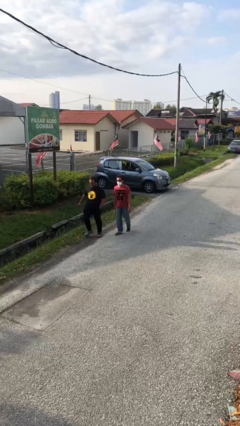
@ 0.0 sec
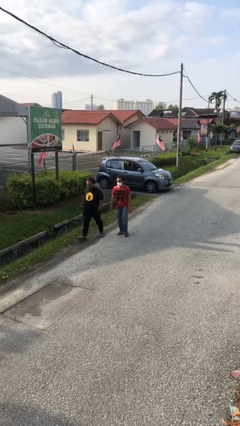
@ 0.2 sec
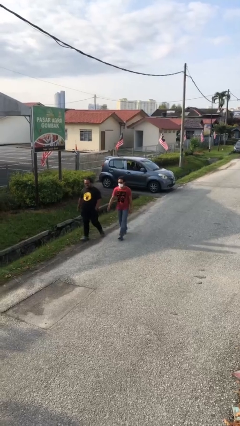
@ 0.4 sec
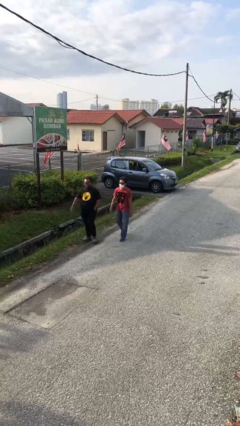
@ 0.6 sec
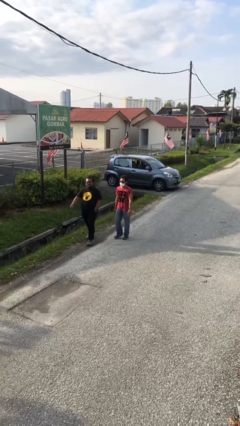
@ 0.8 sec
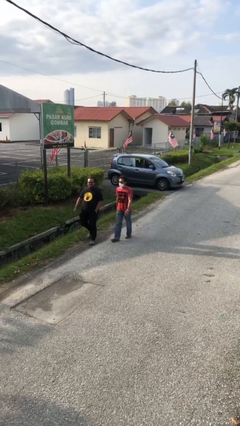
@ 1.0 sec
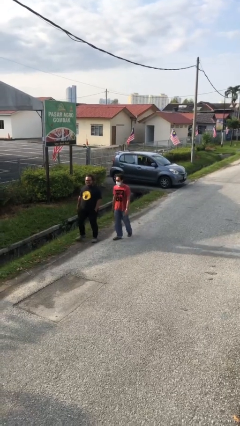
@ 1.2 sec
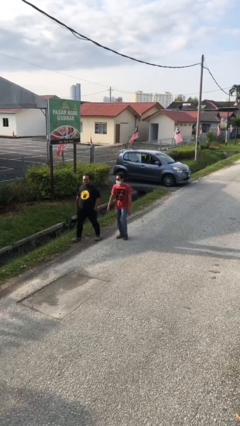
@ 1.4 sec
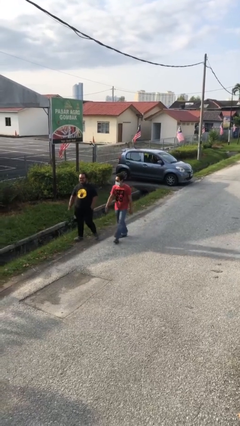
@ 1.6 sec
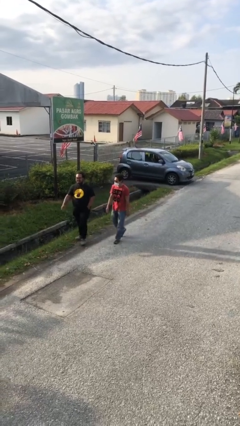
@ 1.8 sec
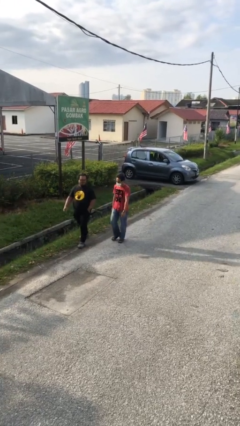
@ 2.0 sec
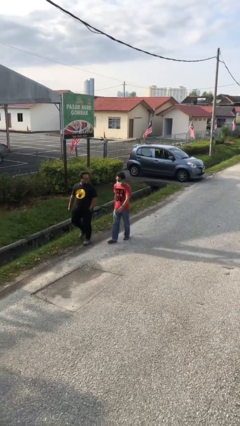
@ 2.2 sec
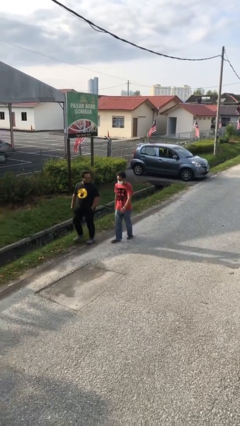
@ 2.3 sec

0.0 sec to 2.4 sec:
person talks to person

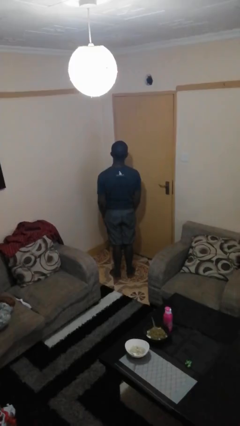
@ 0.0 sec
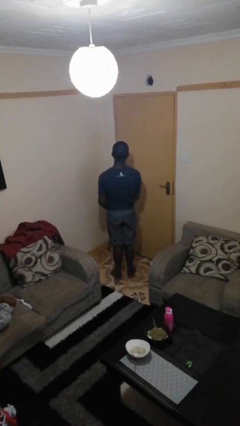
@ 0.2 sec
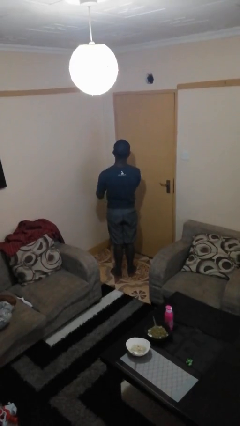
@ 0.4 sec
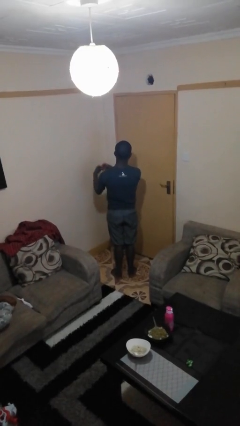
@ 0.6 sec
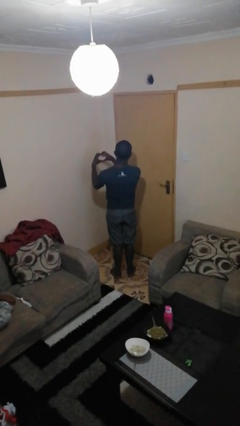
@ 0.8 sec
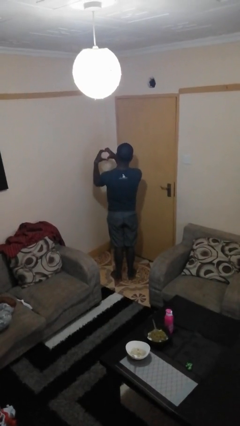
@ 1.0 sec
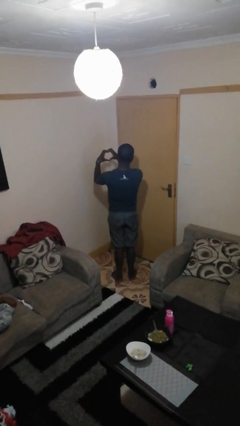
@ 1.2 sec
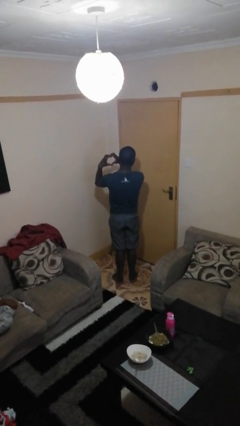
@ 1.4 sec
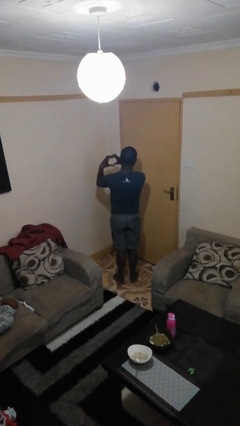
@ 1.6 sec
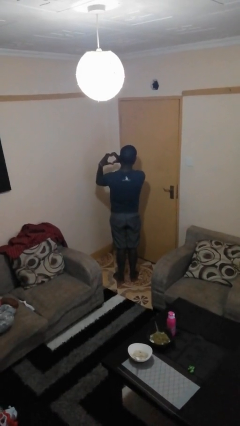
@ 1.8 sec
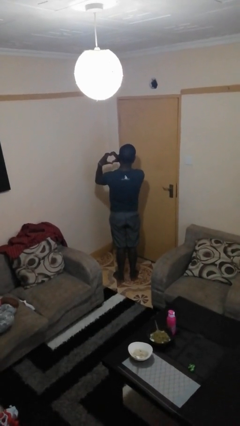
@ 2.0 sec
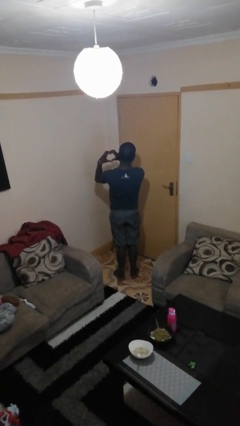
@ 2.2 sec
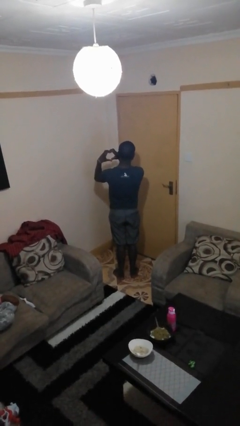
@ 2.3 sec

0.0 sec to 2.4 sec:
person gestures heart

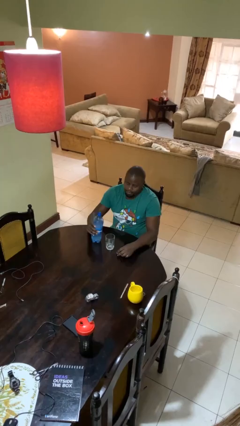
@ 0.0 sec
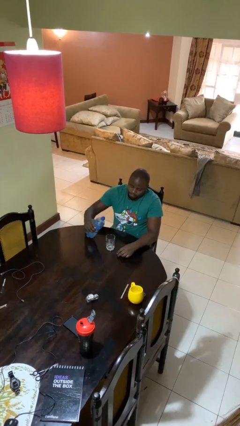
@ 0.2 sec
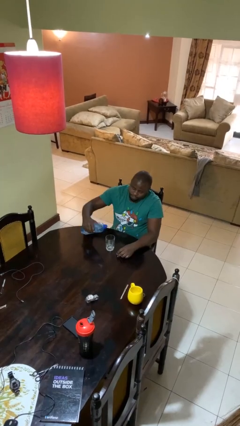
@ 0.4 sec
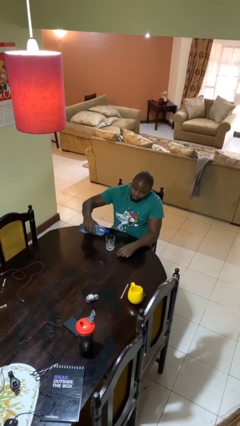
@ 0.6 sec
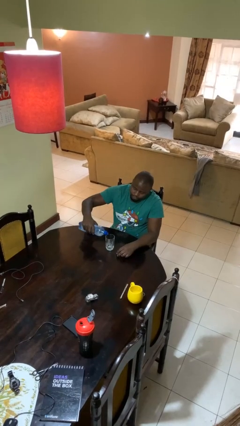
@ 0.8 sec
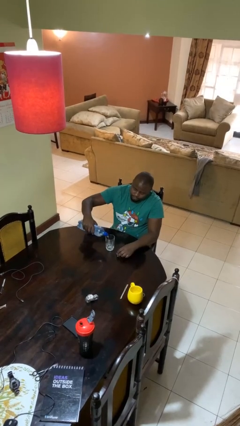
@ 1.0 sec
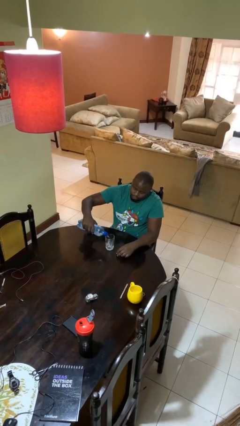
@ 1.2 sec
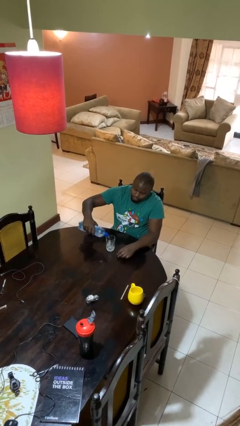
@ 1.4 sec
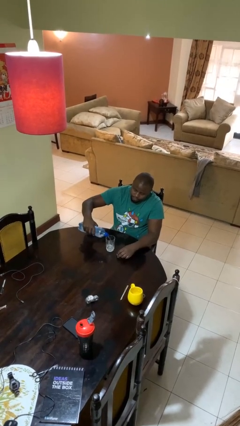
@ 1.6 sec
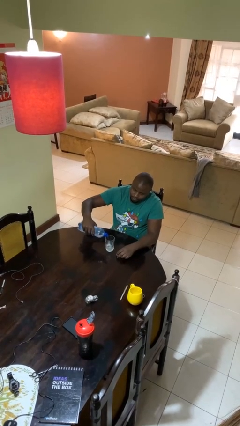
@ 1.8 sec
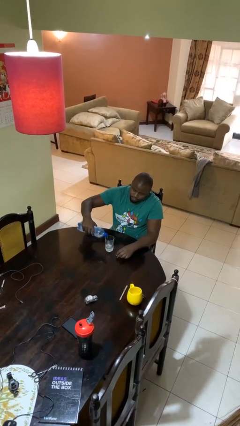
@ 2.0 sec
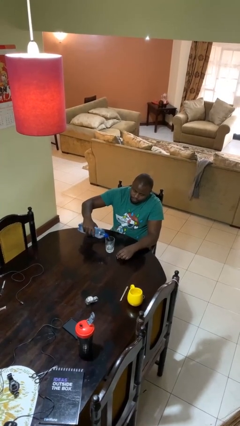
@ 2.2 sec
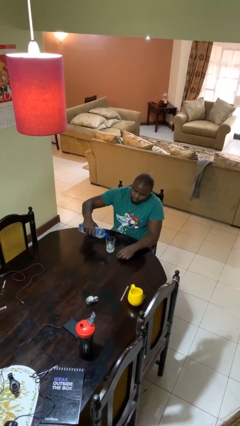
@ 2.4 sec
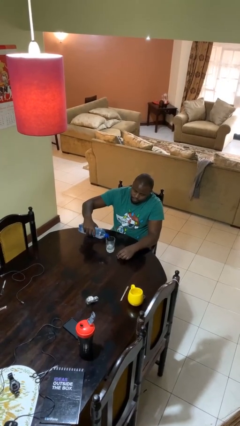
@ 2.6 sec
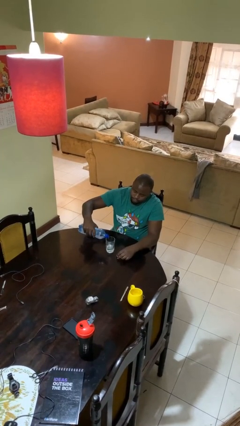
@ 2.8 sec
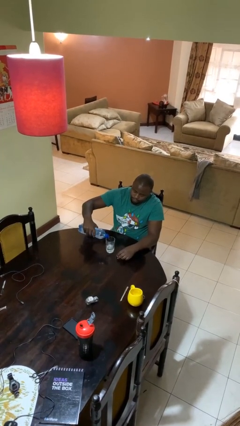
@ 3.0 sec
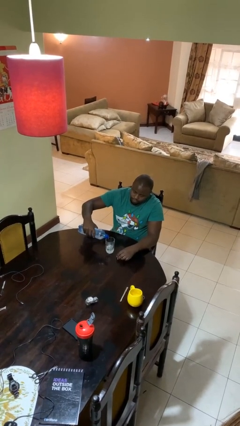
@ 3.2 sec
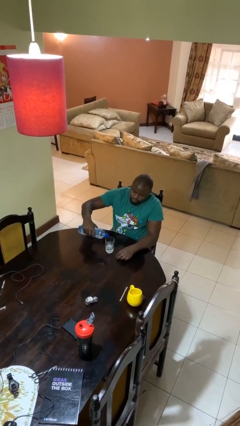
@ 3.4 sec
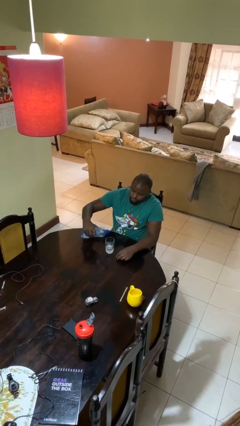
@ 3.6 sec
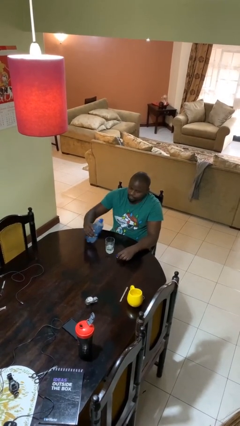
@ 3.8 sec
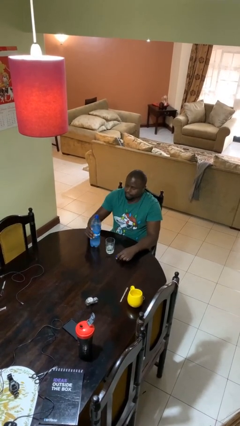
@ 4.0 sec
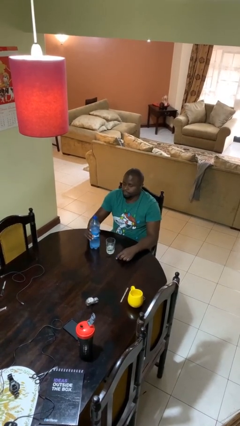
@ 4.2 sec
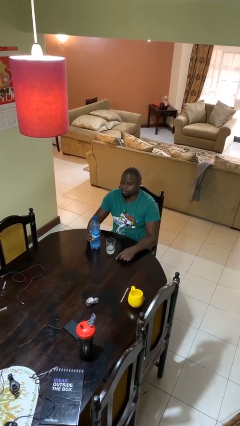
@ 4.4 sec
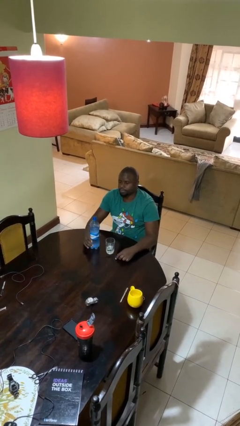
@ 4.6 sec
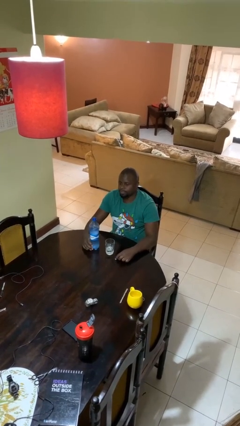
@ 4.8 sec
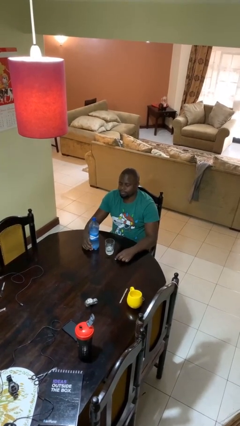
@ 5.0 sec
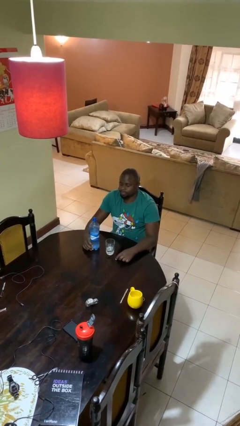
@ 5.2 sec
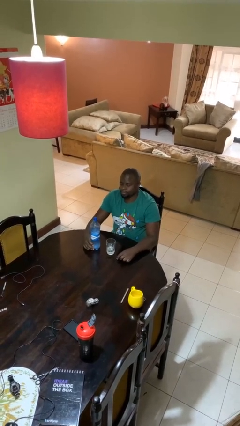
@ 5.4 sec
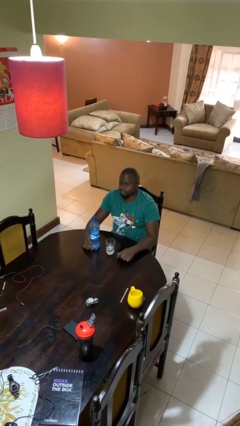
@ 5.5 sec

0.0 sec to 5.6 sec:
person pours liquid into cup

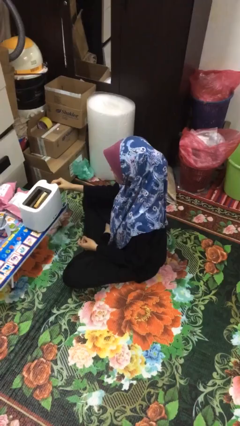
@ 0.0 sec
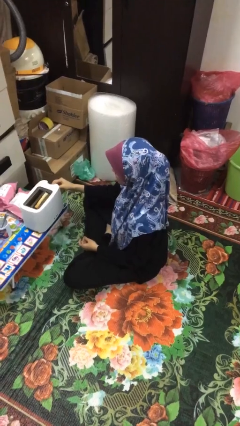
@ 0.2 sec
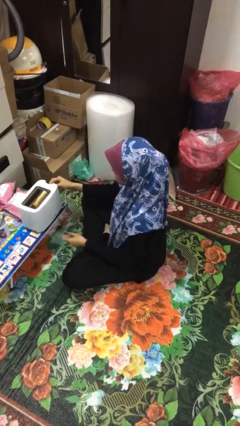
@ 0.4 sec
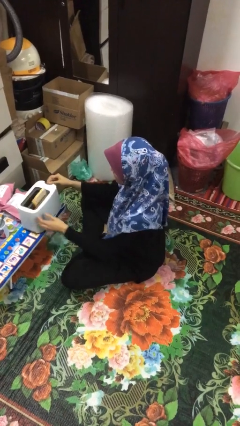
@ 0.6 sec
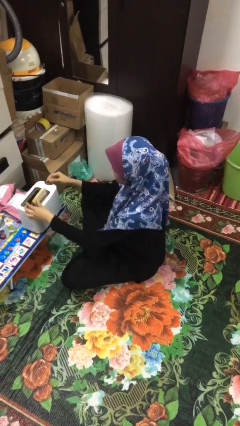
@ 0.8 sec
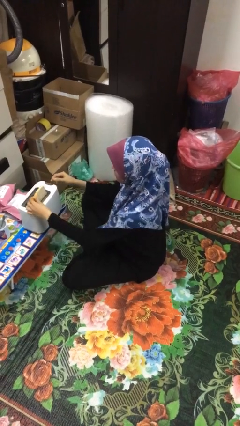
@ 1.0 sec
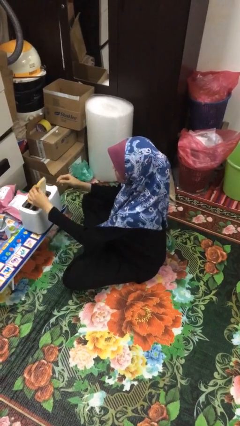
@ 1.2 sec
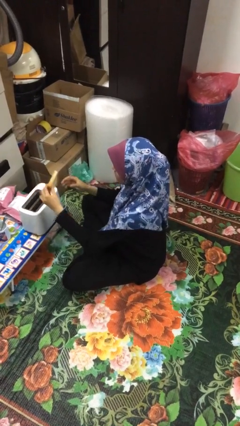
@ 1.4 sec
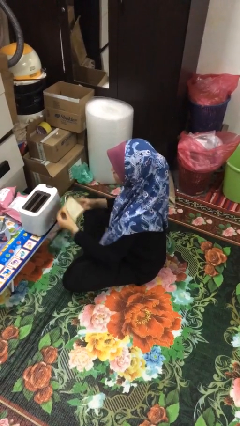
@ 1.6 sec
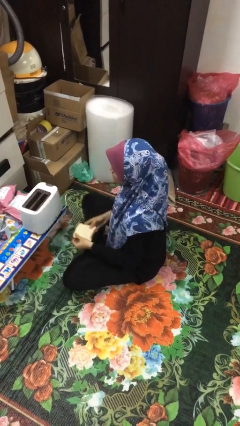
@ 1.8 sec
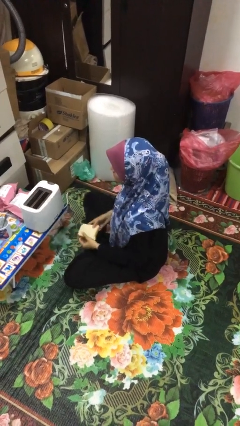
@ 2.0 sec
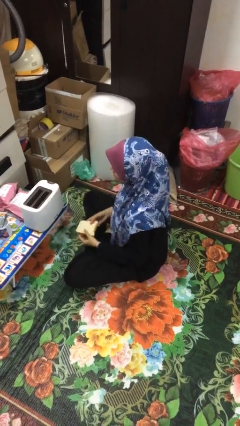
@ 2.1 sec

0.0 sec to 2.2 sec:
person takes object from toaster

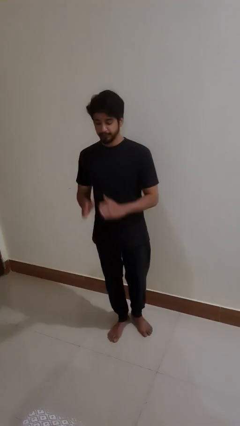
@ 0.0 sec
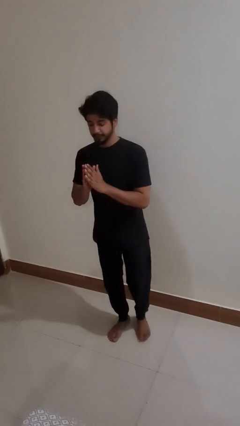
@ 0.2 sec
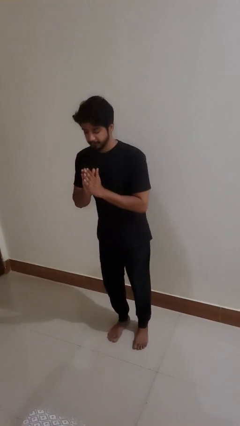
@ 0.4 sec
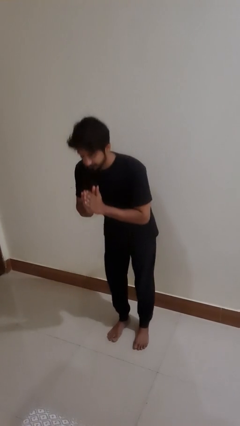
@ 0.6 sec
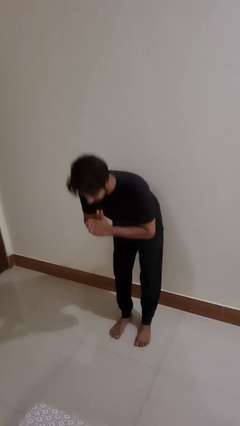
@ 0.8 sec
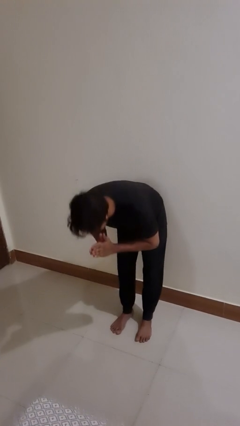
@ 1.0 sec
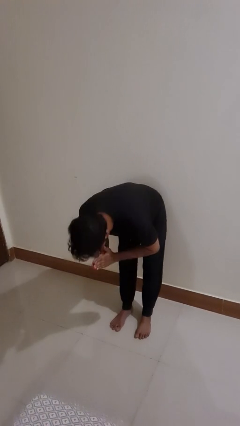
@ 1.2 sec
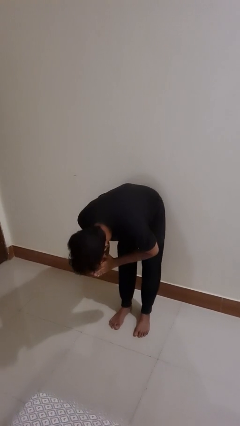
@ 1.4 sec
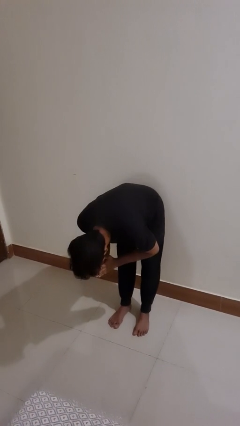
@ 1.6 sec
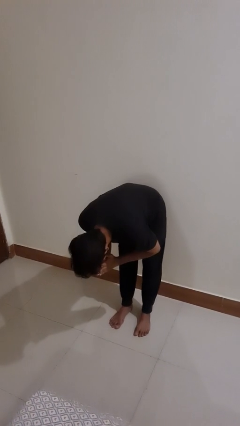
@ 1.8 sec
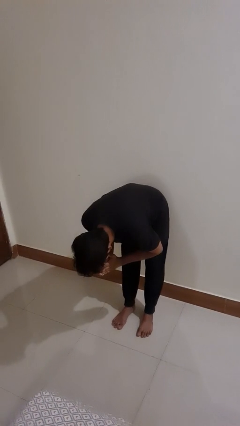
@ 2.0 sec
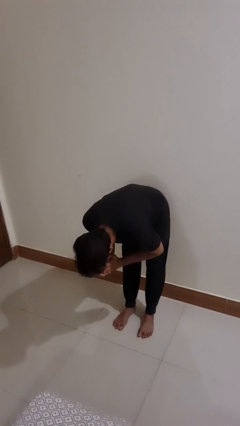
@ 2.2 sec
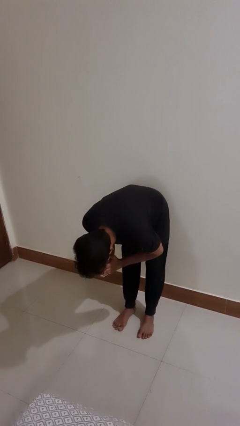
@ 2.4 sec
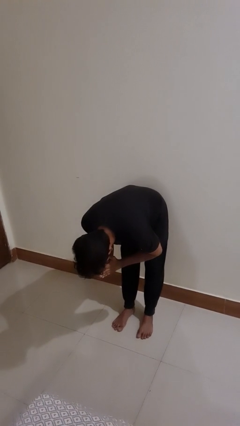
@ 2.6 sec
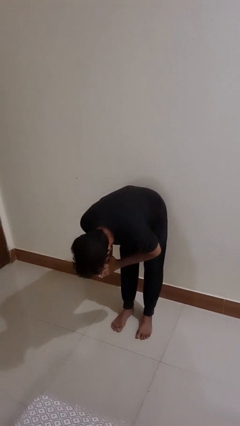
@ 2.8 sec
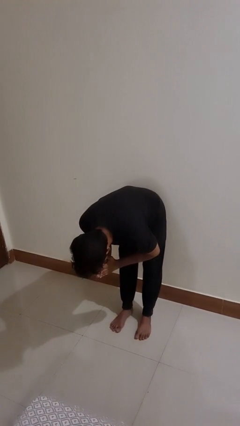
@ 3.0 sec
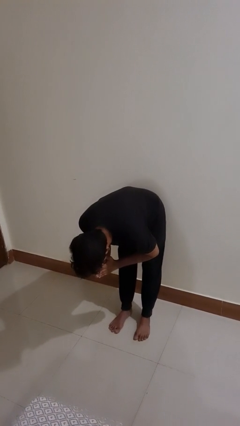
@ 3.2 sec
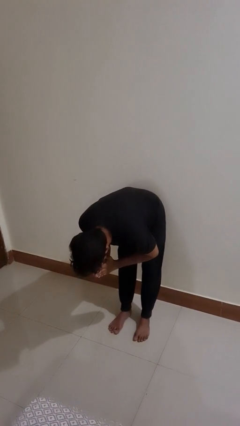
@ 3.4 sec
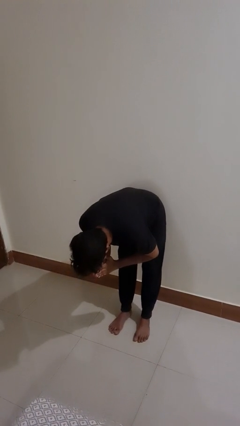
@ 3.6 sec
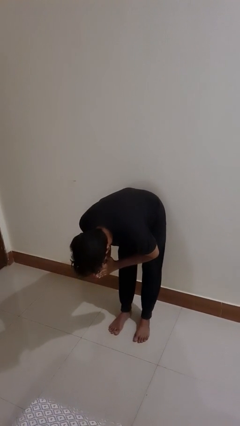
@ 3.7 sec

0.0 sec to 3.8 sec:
person bows

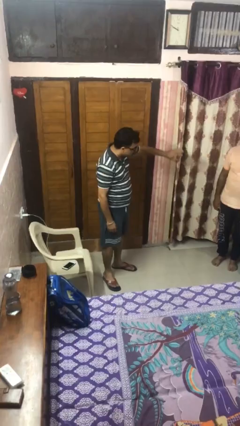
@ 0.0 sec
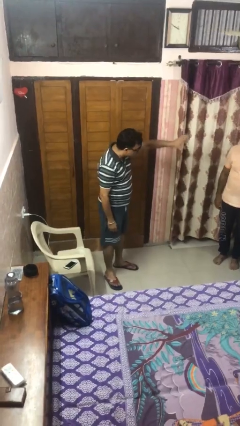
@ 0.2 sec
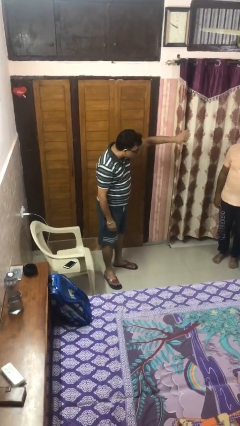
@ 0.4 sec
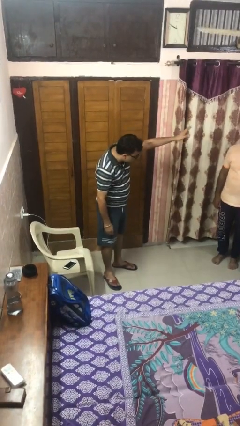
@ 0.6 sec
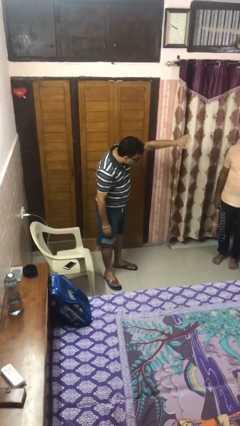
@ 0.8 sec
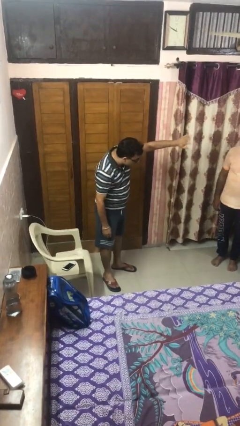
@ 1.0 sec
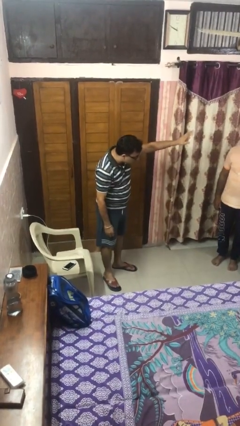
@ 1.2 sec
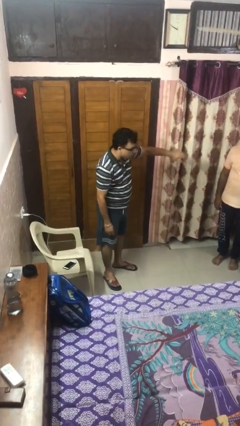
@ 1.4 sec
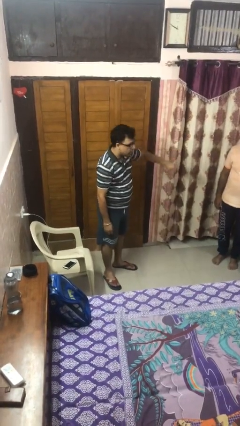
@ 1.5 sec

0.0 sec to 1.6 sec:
person waves at person
